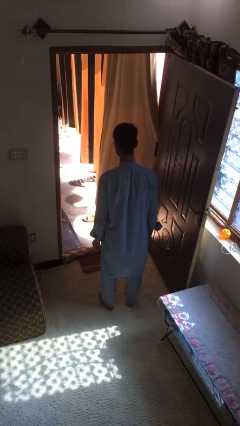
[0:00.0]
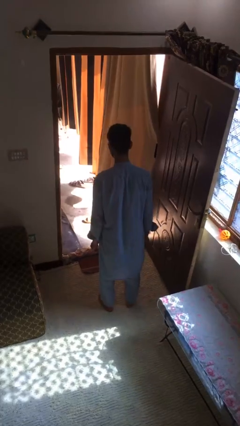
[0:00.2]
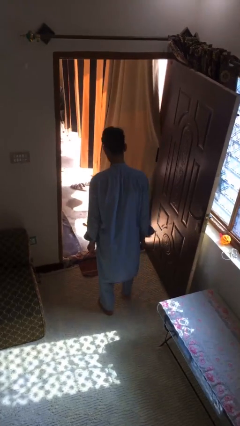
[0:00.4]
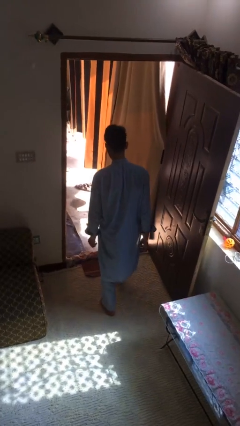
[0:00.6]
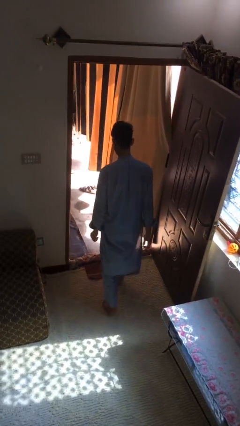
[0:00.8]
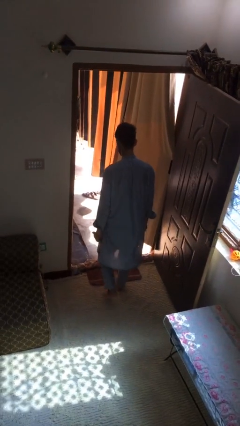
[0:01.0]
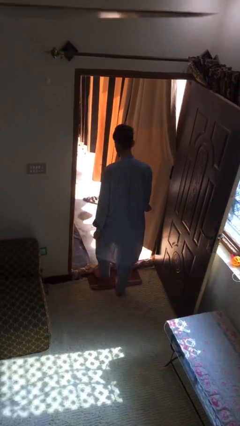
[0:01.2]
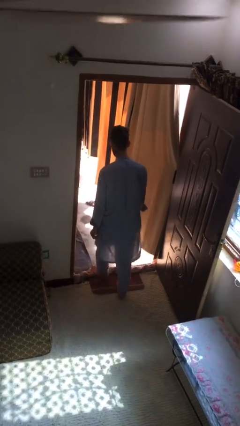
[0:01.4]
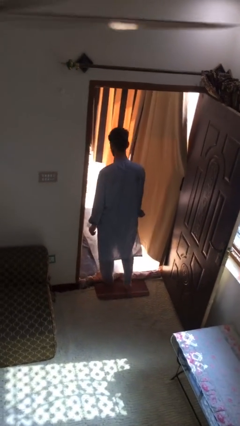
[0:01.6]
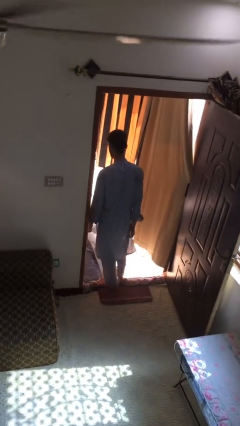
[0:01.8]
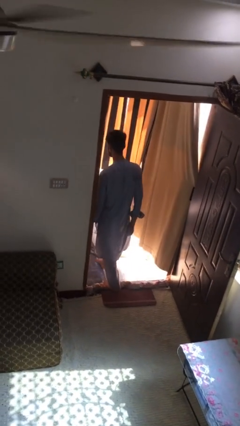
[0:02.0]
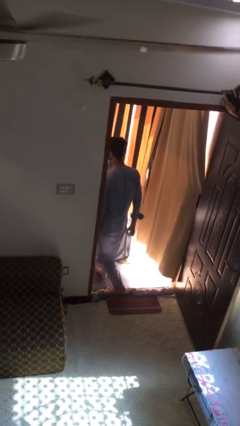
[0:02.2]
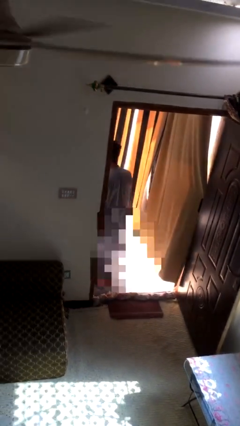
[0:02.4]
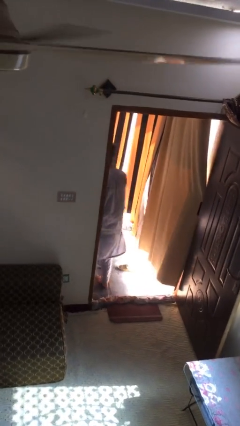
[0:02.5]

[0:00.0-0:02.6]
person exits scene through structure

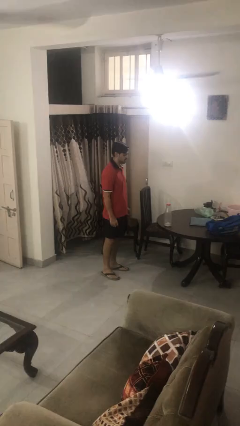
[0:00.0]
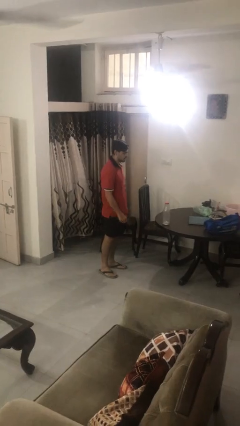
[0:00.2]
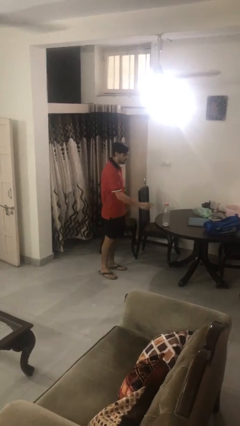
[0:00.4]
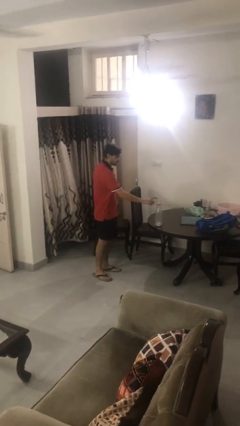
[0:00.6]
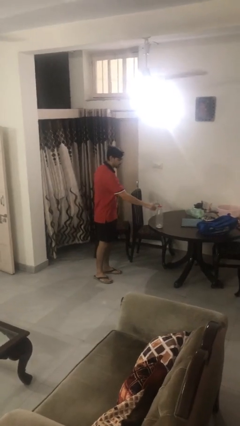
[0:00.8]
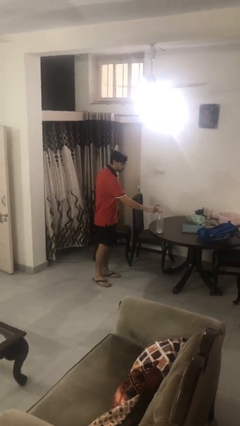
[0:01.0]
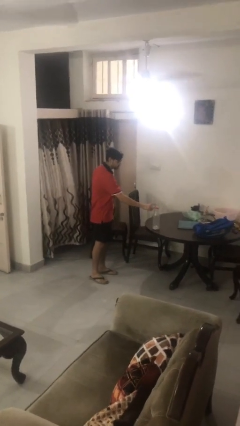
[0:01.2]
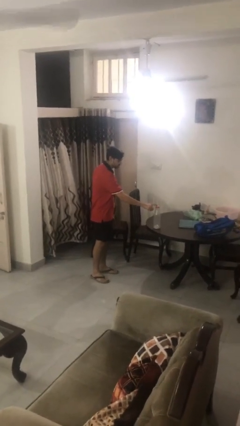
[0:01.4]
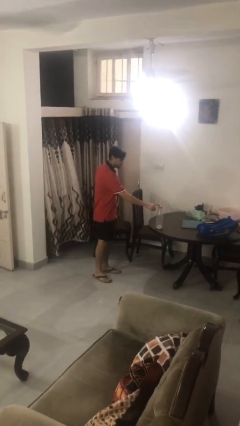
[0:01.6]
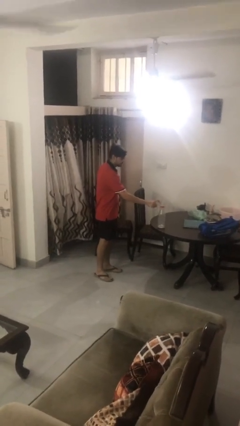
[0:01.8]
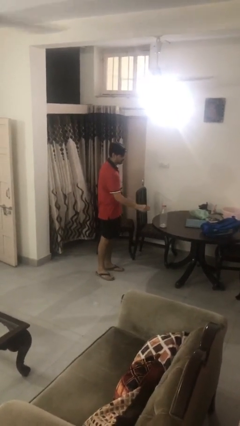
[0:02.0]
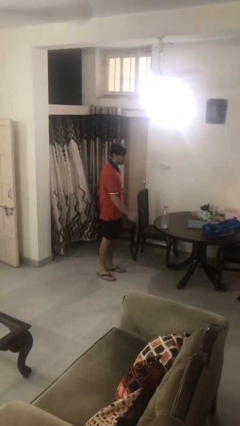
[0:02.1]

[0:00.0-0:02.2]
person taps object with finger

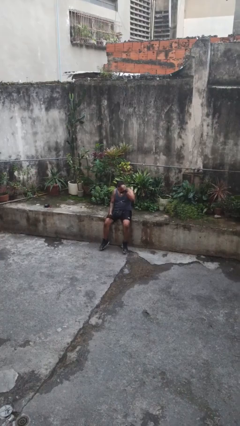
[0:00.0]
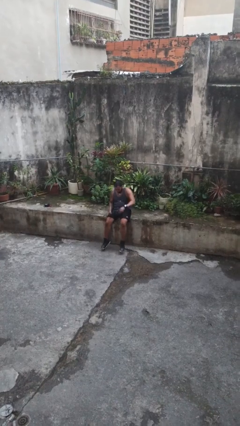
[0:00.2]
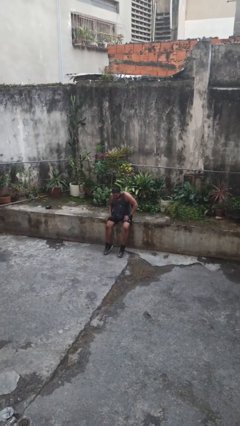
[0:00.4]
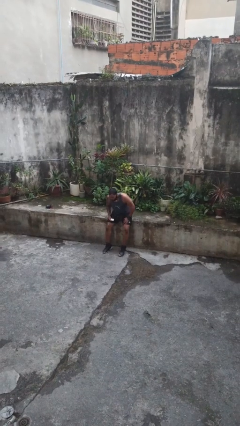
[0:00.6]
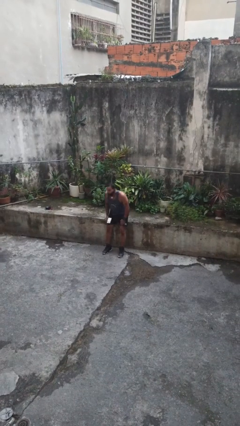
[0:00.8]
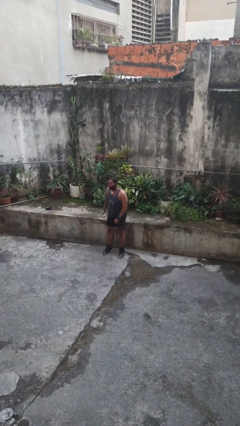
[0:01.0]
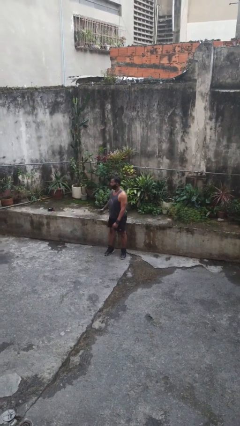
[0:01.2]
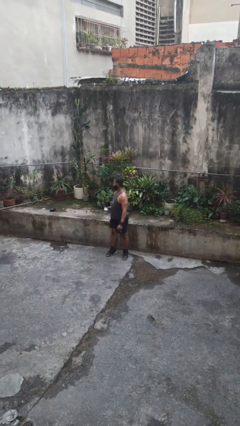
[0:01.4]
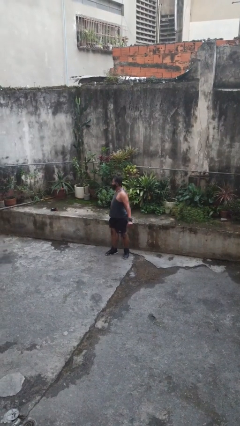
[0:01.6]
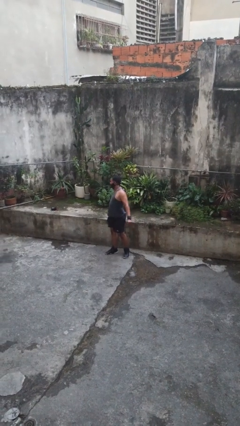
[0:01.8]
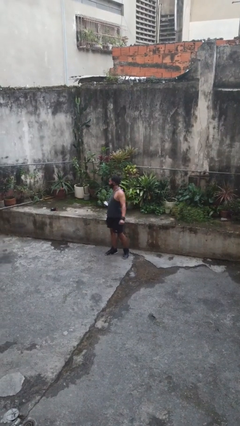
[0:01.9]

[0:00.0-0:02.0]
person stands up

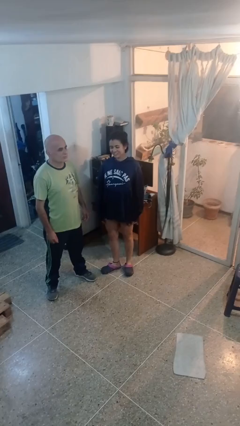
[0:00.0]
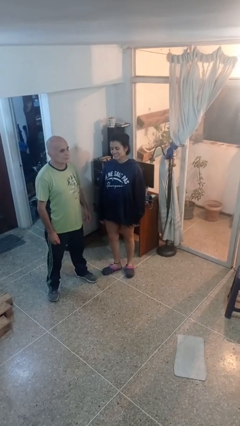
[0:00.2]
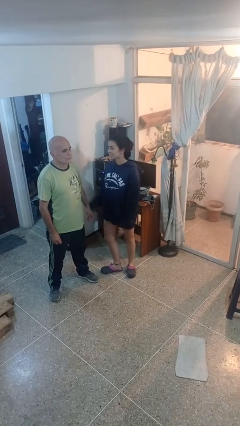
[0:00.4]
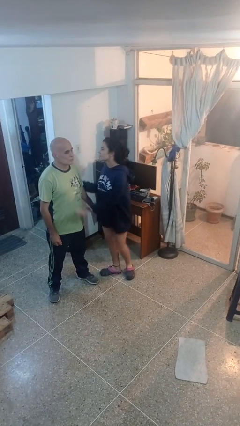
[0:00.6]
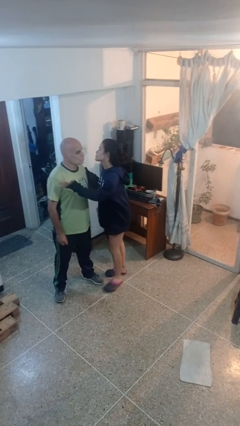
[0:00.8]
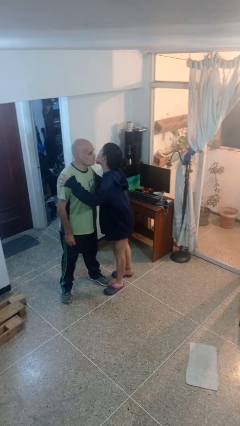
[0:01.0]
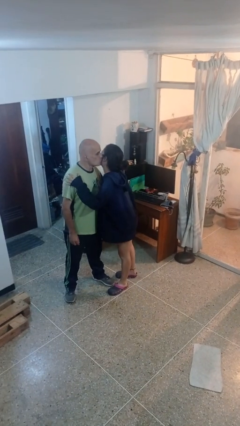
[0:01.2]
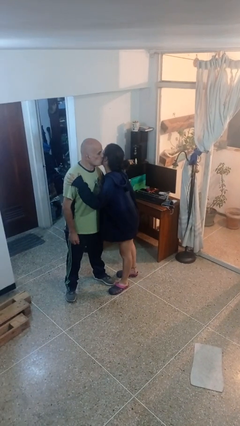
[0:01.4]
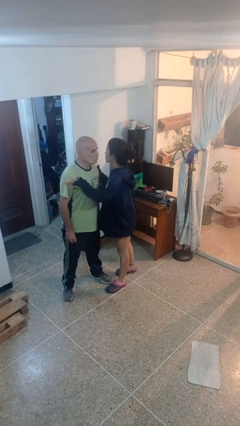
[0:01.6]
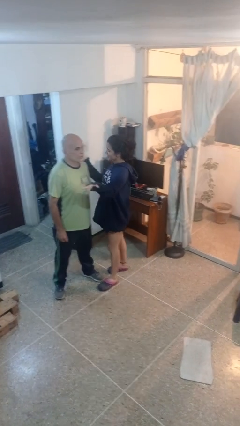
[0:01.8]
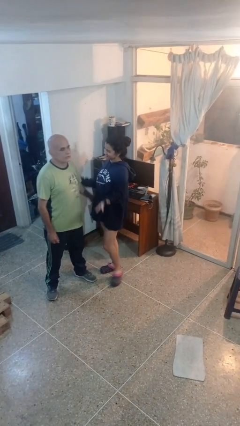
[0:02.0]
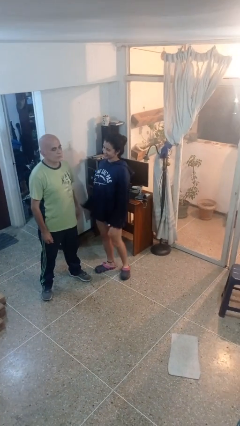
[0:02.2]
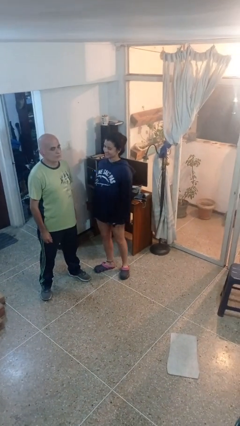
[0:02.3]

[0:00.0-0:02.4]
person kisses cheek of person

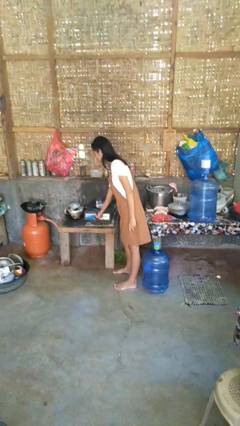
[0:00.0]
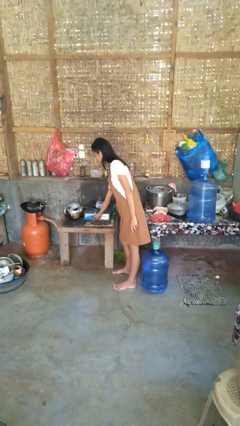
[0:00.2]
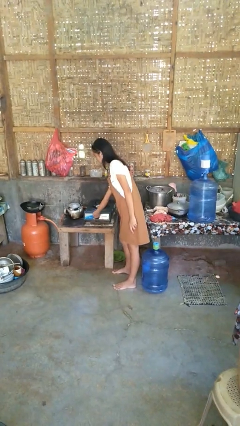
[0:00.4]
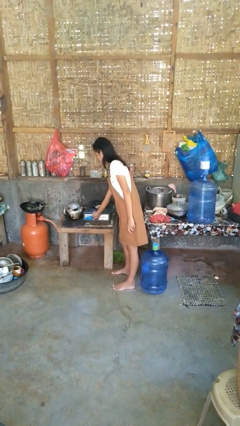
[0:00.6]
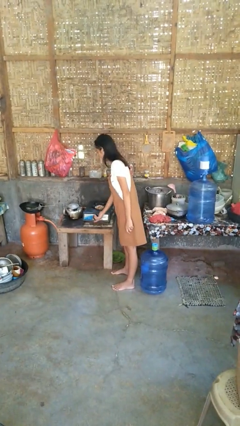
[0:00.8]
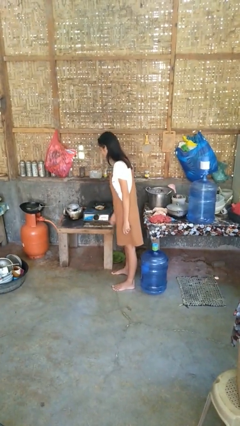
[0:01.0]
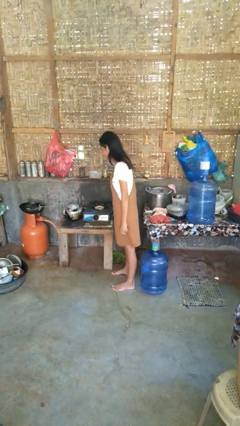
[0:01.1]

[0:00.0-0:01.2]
person turns off stovetop

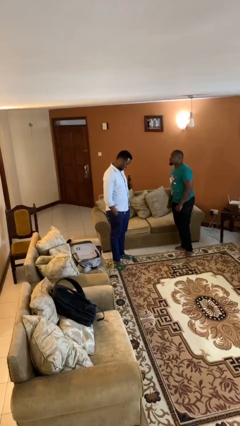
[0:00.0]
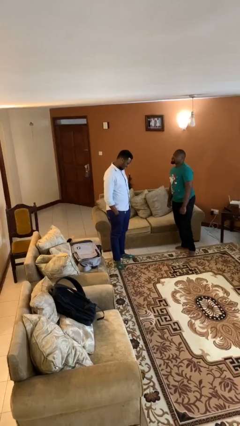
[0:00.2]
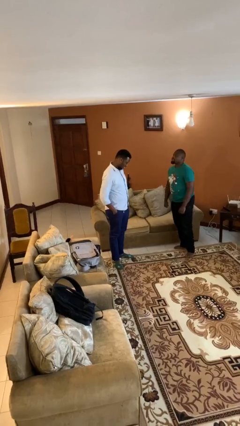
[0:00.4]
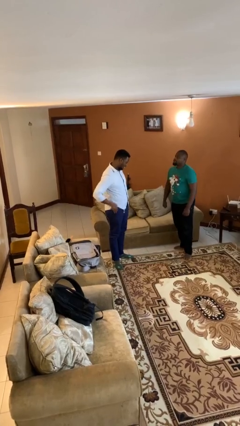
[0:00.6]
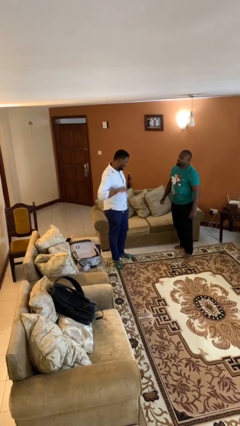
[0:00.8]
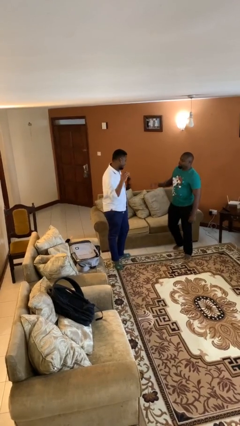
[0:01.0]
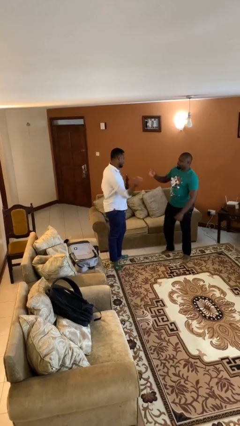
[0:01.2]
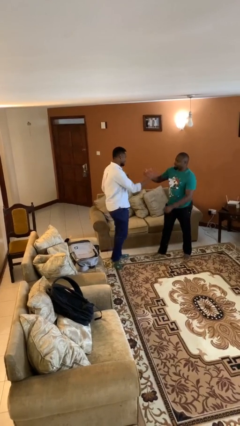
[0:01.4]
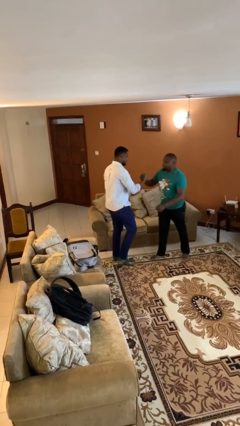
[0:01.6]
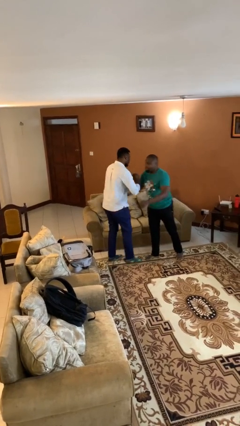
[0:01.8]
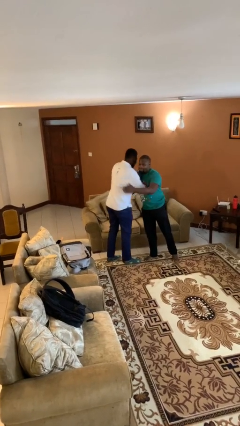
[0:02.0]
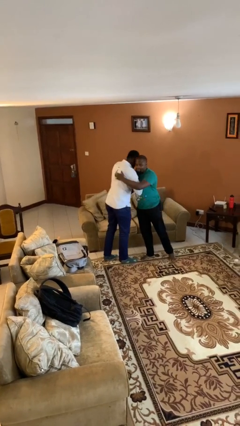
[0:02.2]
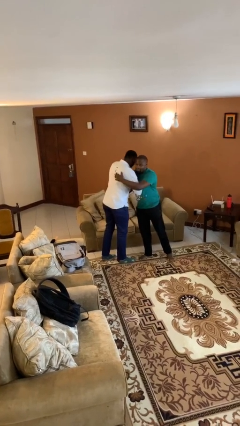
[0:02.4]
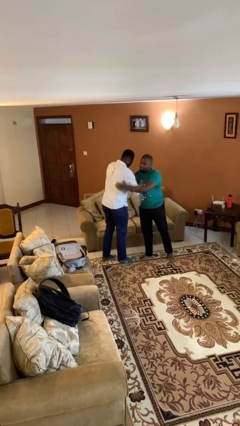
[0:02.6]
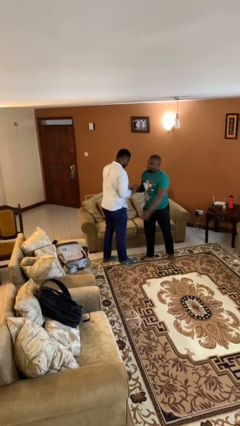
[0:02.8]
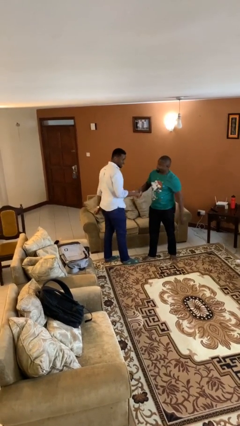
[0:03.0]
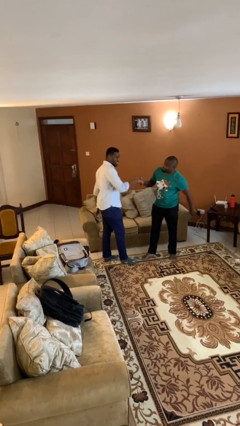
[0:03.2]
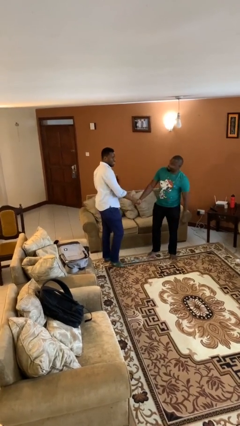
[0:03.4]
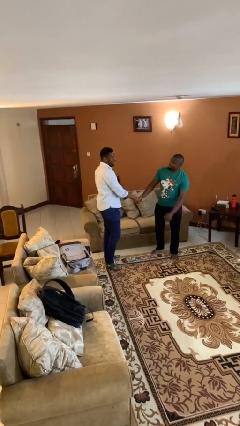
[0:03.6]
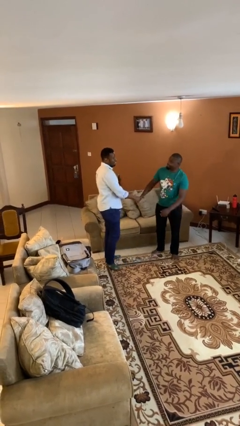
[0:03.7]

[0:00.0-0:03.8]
person embraces person

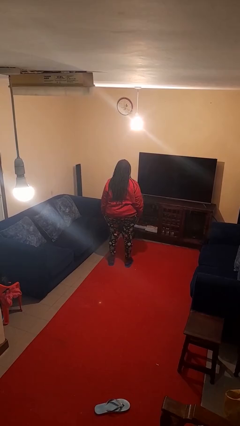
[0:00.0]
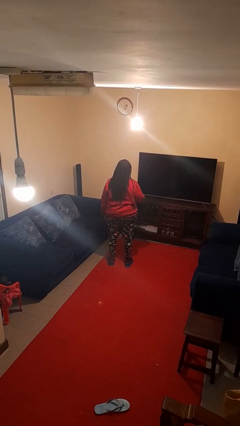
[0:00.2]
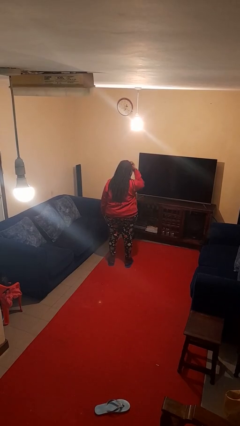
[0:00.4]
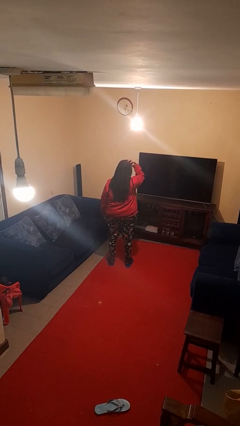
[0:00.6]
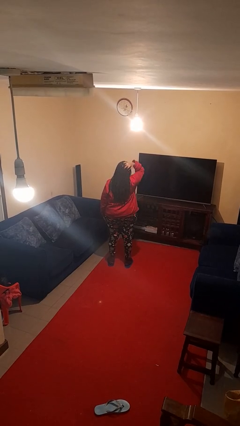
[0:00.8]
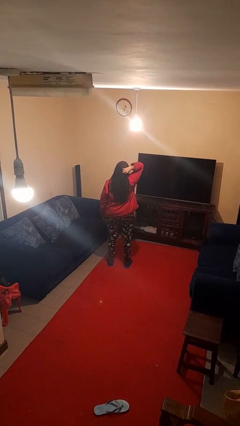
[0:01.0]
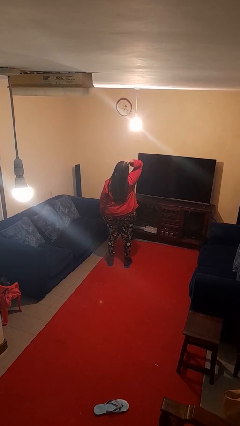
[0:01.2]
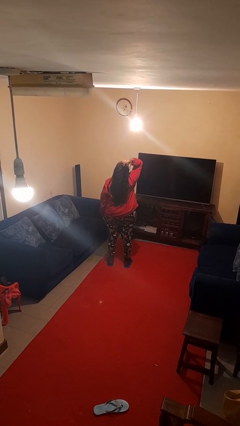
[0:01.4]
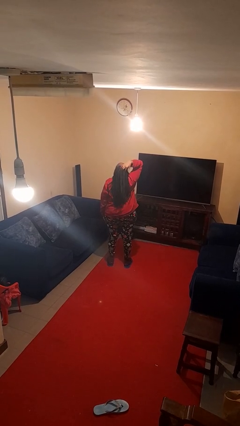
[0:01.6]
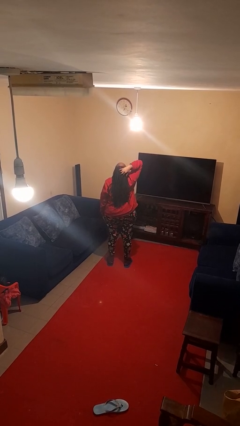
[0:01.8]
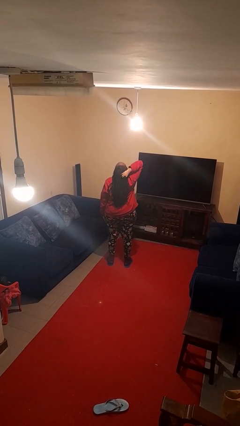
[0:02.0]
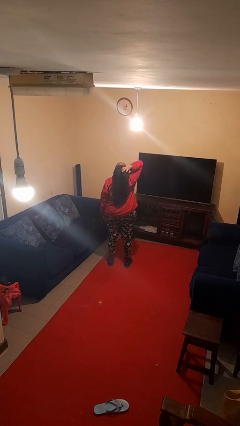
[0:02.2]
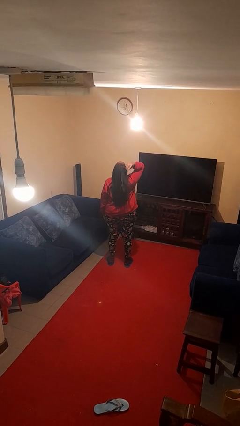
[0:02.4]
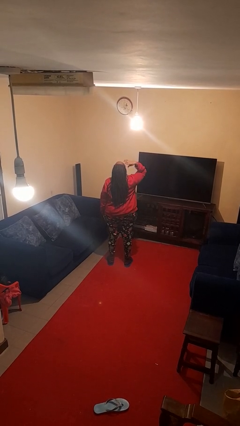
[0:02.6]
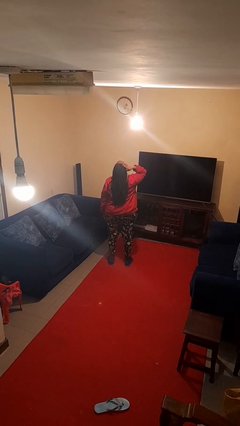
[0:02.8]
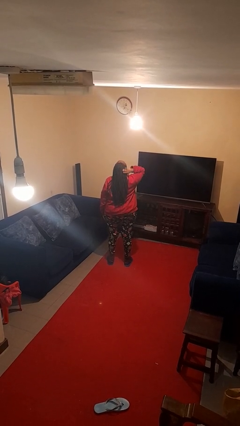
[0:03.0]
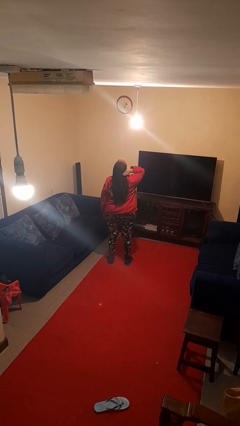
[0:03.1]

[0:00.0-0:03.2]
person strokes hair
